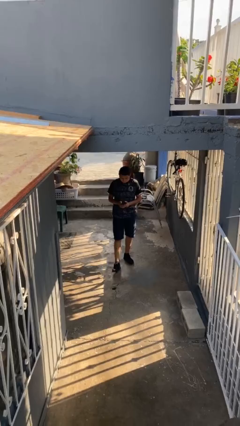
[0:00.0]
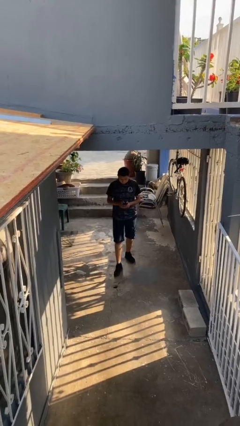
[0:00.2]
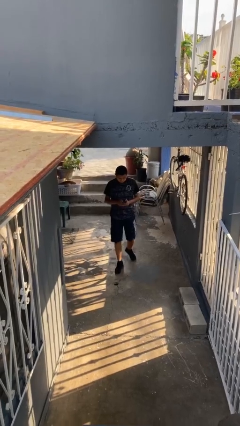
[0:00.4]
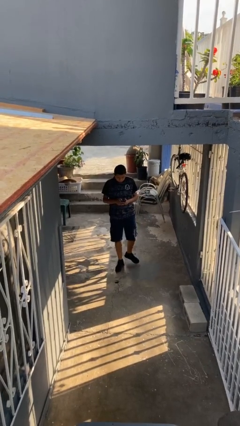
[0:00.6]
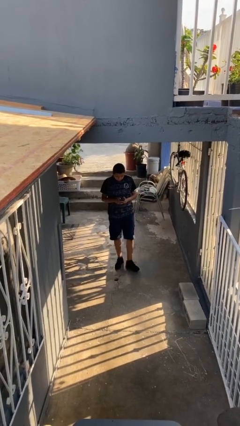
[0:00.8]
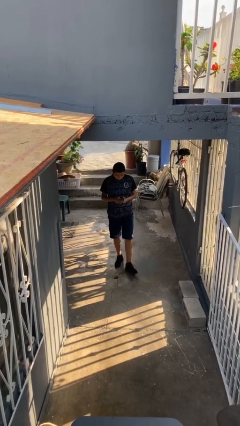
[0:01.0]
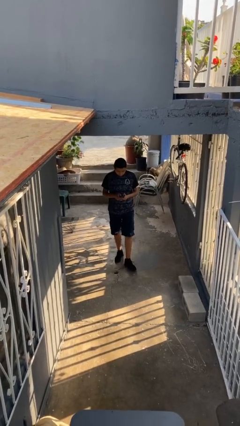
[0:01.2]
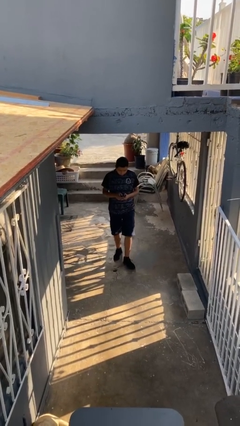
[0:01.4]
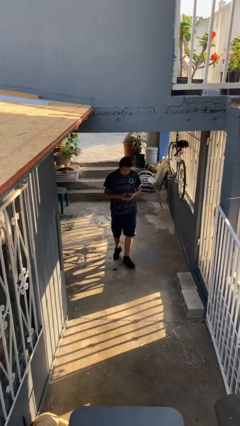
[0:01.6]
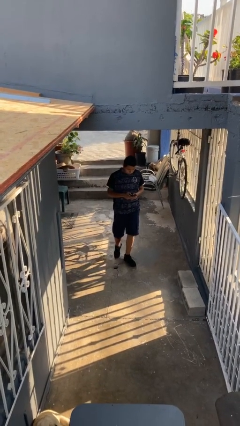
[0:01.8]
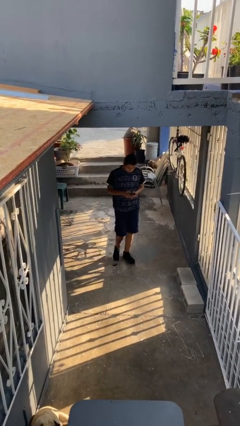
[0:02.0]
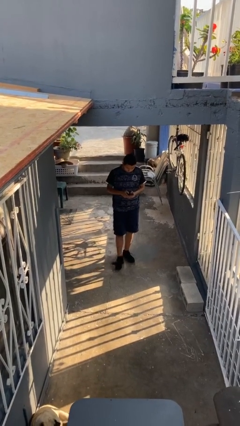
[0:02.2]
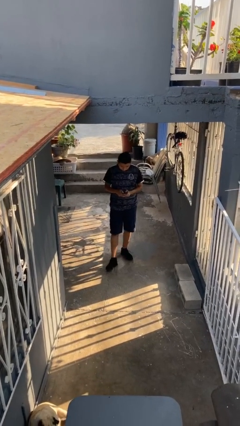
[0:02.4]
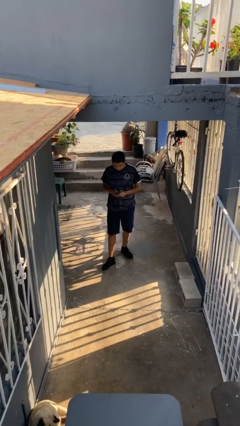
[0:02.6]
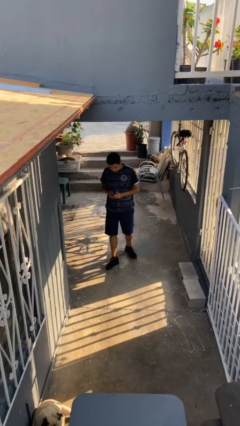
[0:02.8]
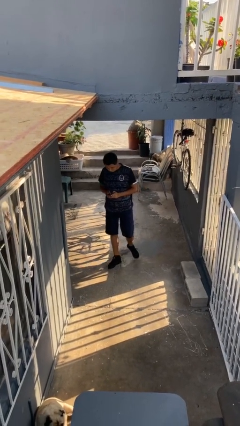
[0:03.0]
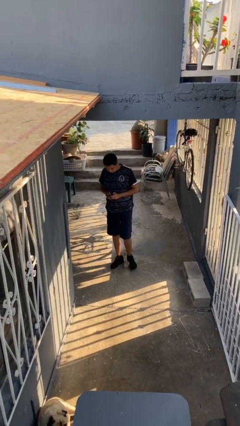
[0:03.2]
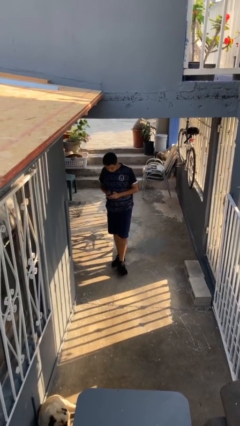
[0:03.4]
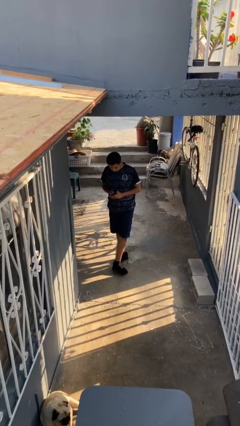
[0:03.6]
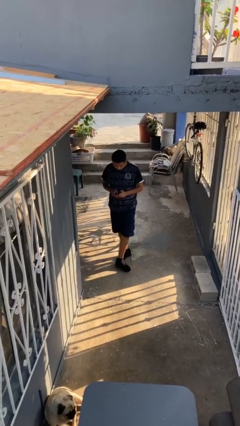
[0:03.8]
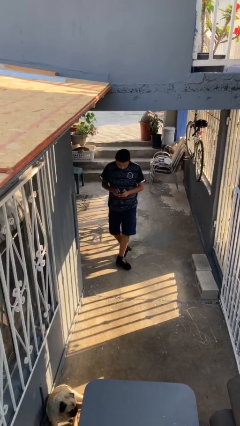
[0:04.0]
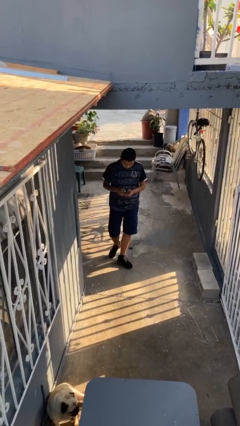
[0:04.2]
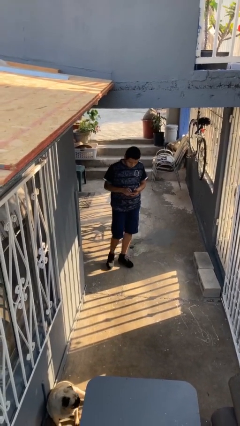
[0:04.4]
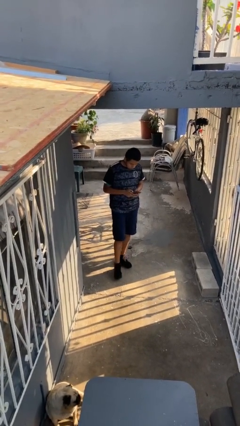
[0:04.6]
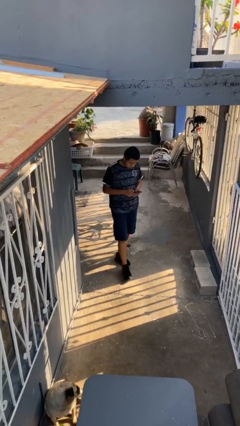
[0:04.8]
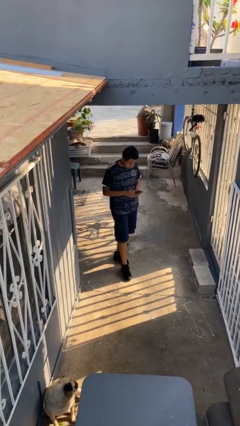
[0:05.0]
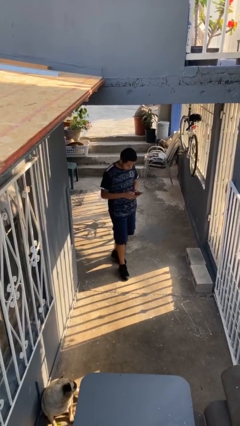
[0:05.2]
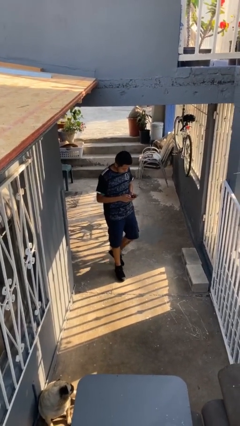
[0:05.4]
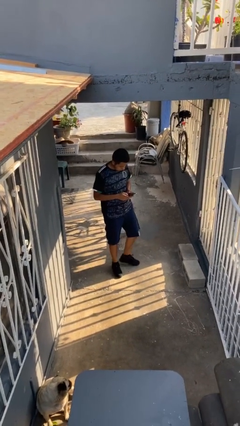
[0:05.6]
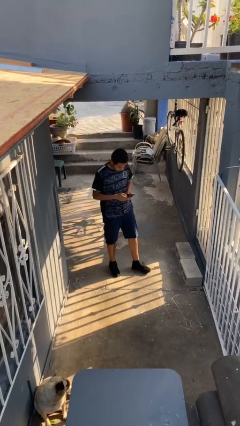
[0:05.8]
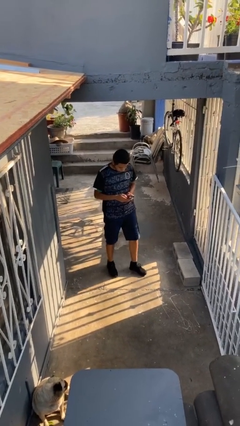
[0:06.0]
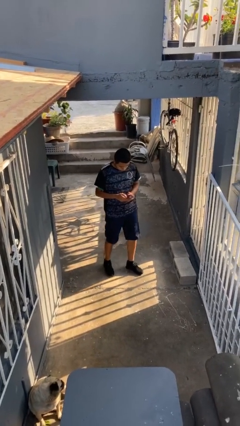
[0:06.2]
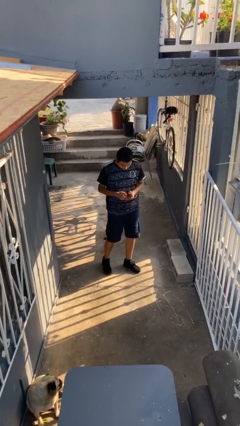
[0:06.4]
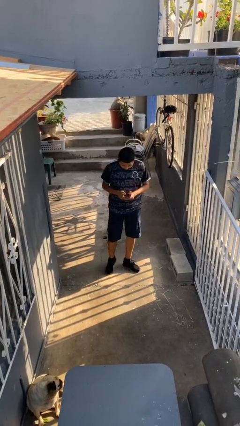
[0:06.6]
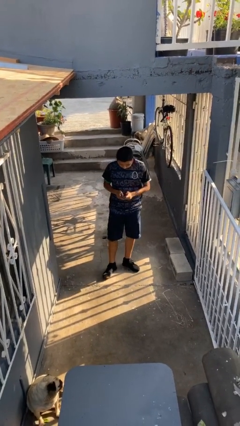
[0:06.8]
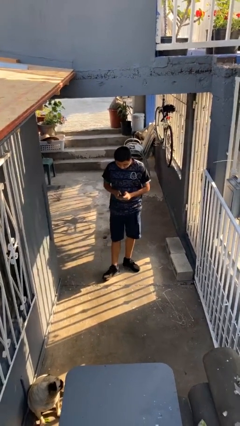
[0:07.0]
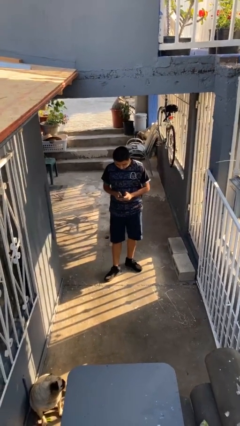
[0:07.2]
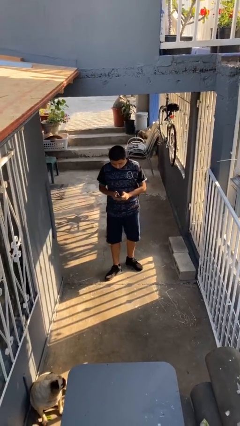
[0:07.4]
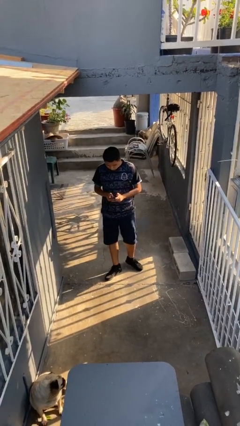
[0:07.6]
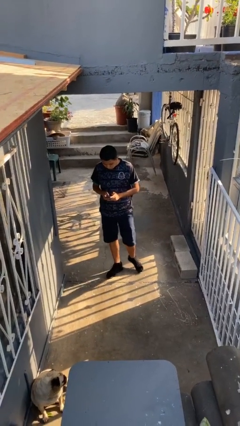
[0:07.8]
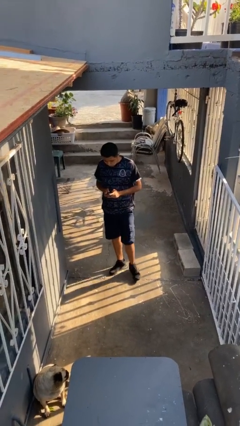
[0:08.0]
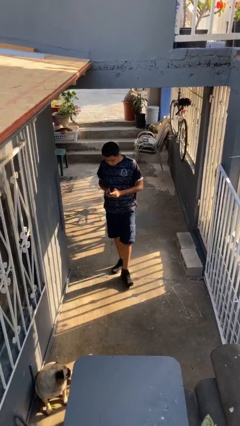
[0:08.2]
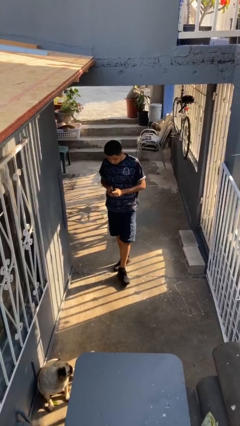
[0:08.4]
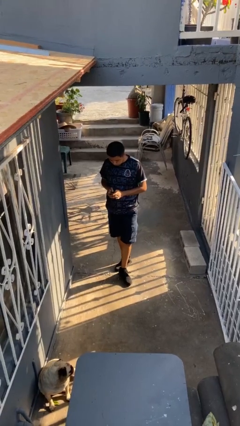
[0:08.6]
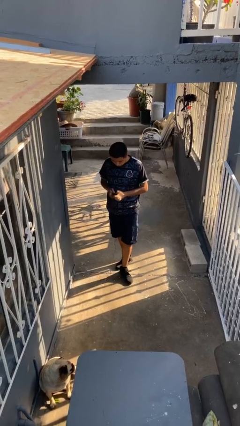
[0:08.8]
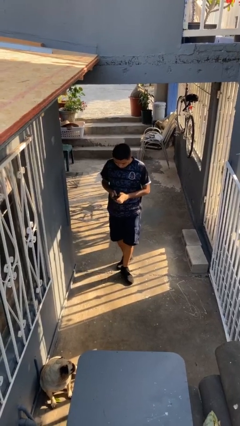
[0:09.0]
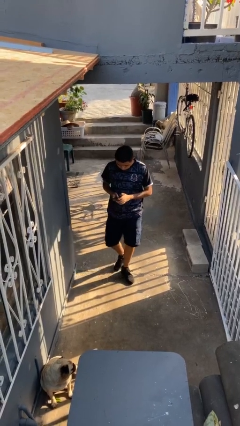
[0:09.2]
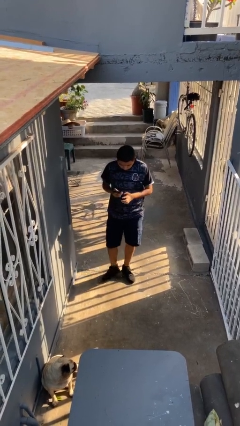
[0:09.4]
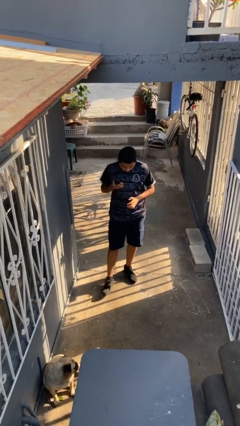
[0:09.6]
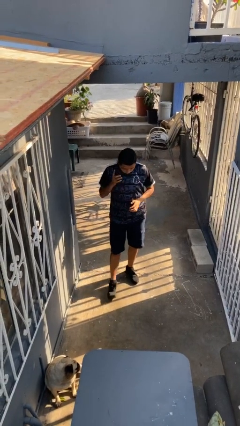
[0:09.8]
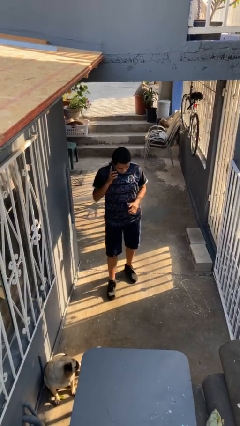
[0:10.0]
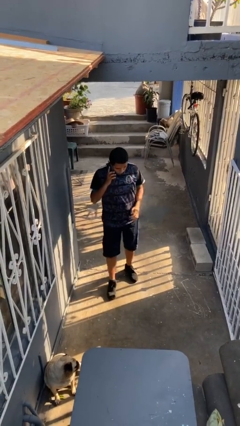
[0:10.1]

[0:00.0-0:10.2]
person texts on phone

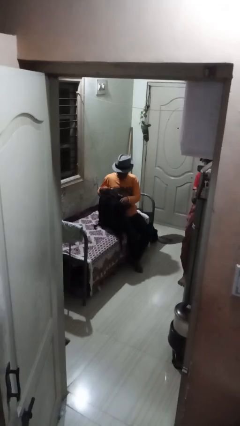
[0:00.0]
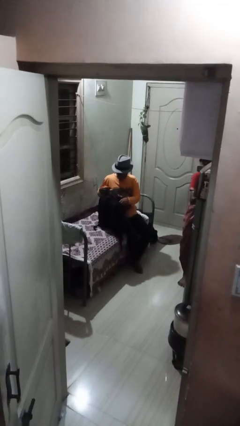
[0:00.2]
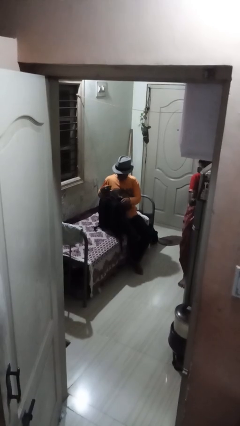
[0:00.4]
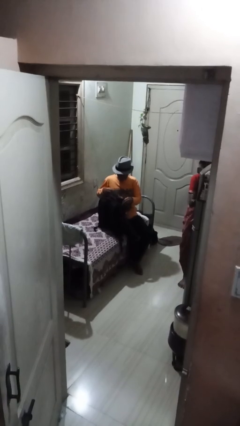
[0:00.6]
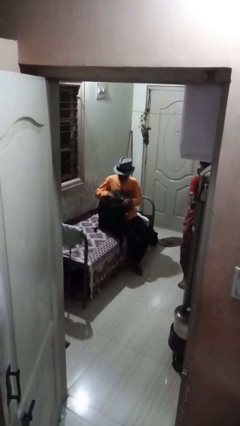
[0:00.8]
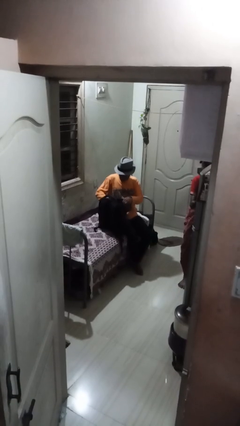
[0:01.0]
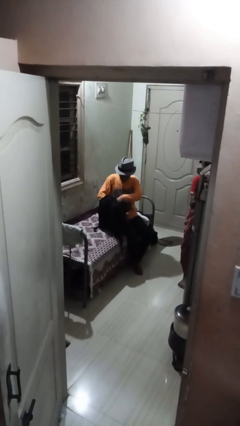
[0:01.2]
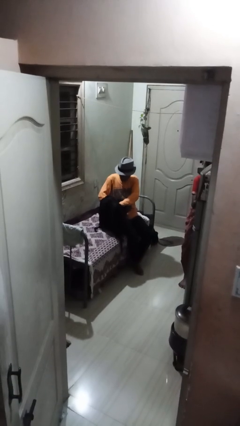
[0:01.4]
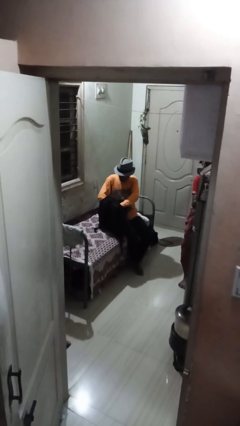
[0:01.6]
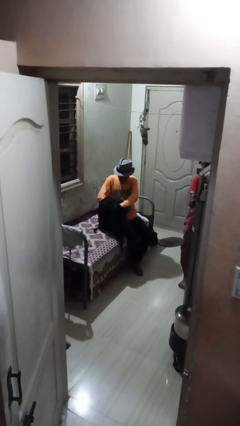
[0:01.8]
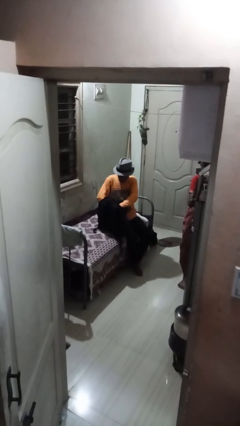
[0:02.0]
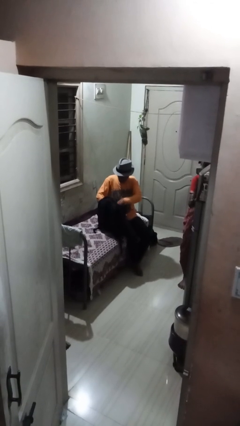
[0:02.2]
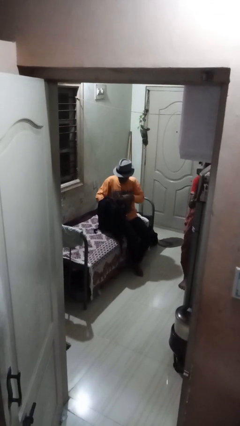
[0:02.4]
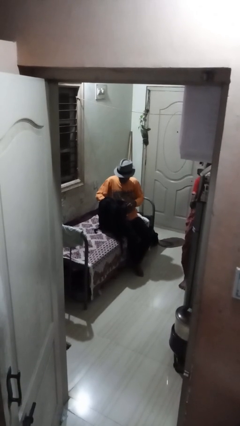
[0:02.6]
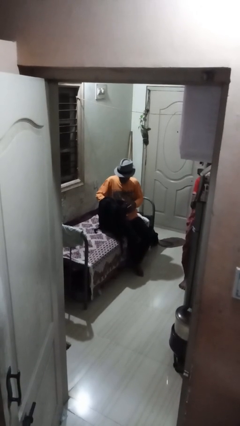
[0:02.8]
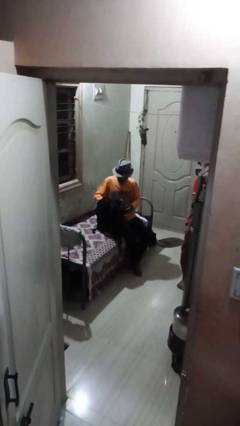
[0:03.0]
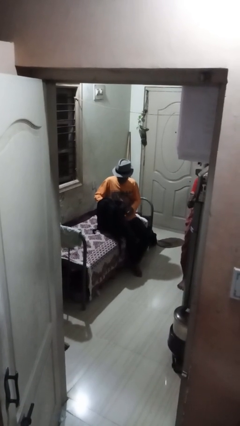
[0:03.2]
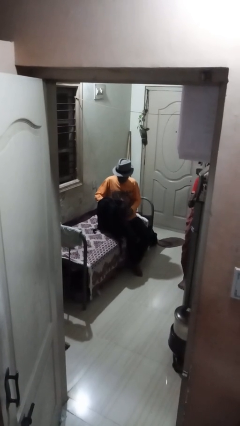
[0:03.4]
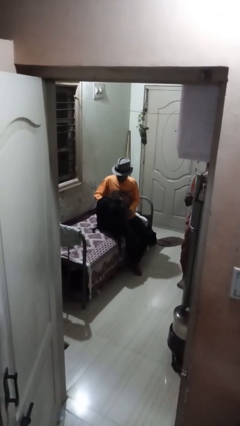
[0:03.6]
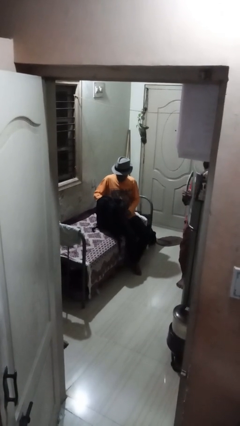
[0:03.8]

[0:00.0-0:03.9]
person searches in backpack

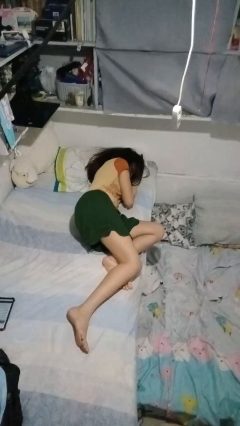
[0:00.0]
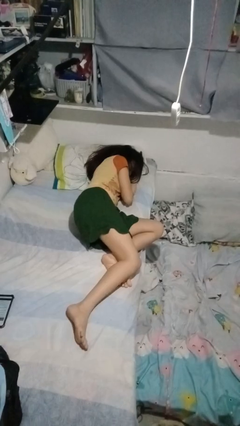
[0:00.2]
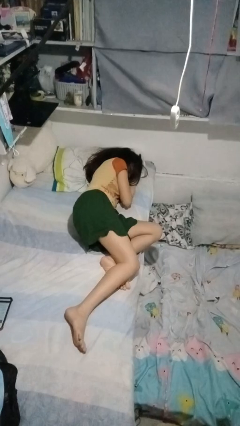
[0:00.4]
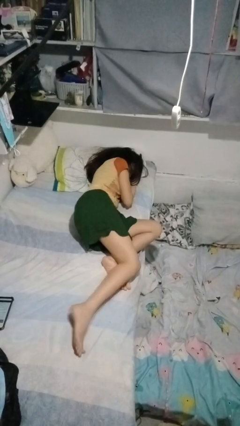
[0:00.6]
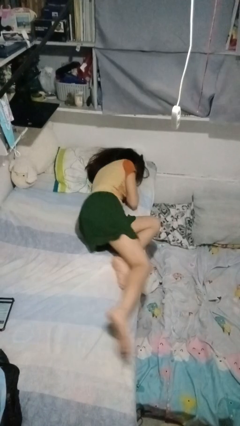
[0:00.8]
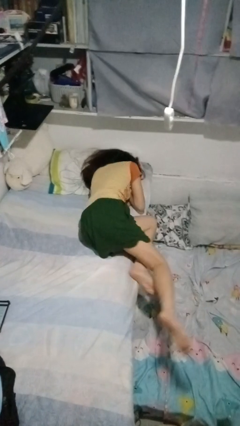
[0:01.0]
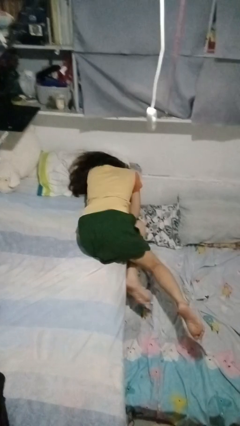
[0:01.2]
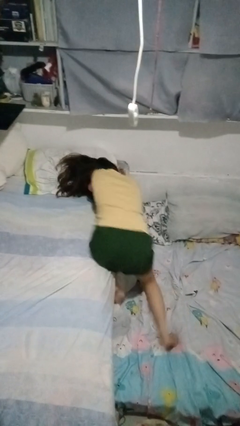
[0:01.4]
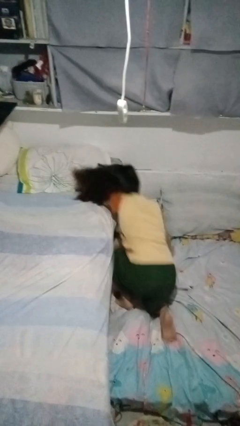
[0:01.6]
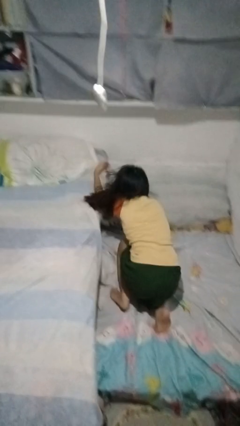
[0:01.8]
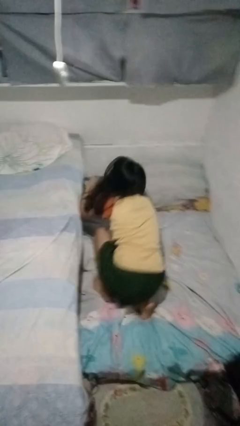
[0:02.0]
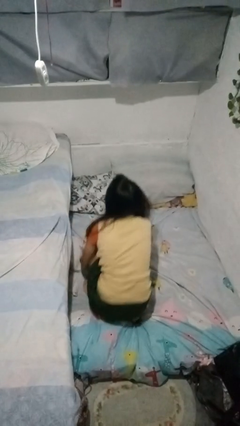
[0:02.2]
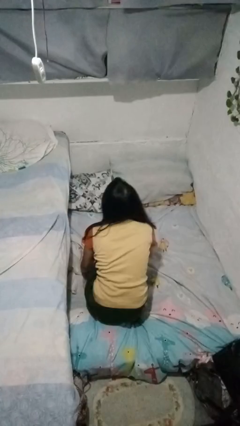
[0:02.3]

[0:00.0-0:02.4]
person falls from bed

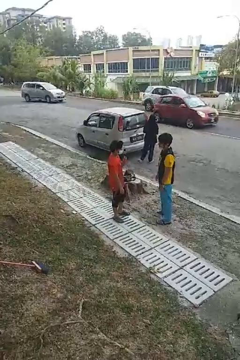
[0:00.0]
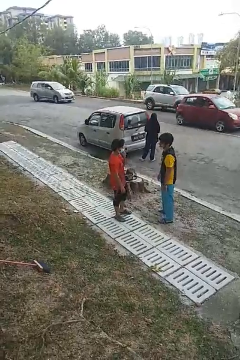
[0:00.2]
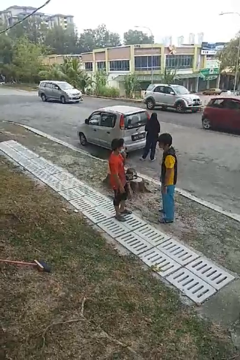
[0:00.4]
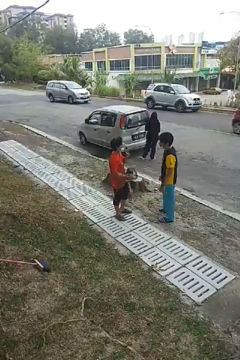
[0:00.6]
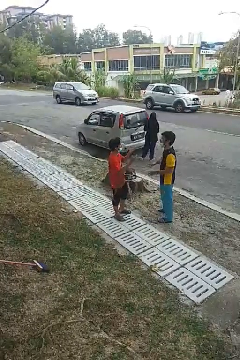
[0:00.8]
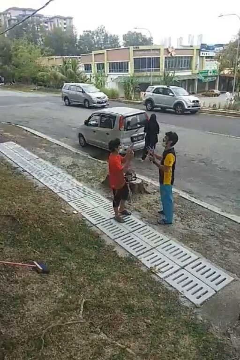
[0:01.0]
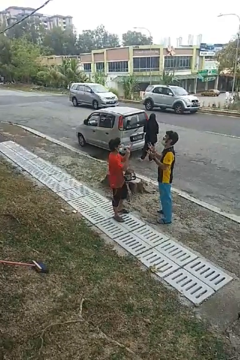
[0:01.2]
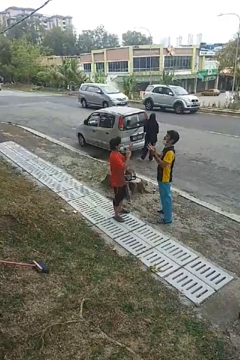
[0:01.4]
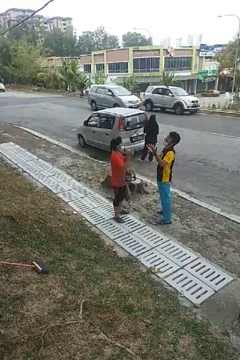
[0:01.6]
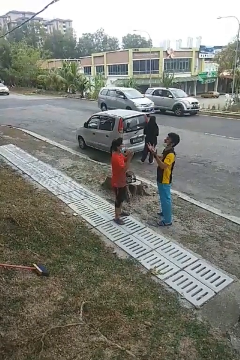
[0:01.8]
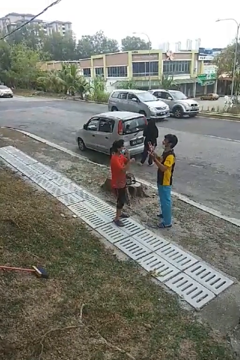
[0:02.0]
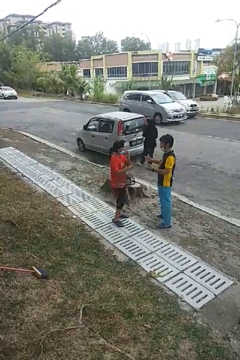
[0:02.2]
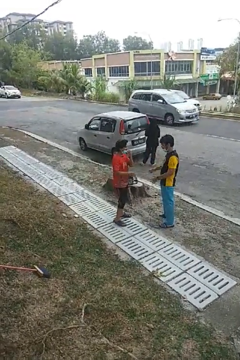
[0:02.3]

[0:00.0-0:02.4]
person talks to person
